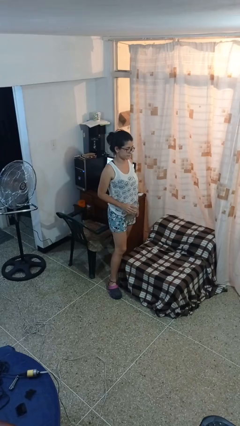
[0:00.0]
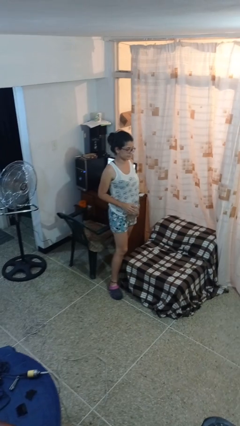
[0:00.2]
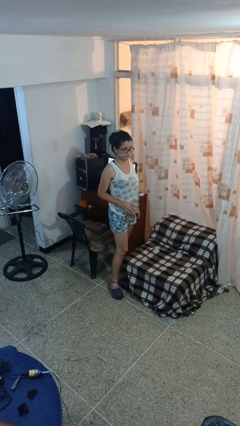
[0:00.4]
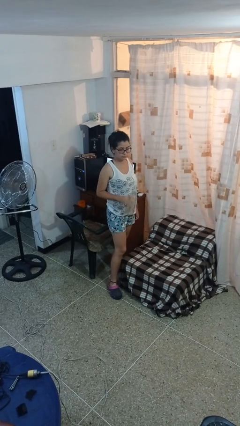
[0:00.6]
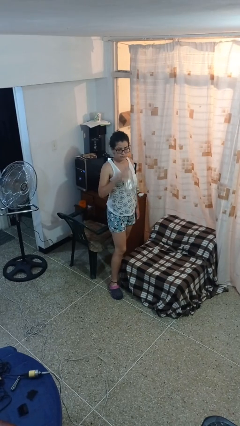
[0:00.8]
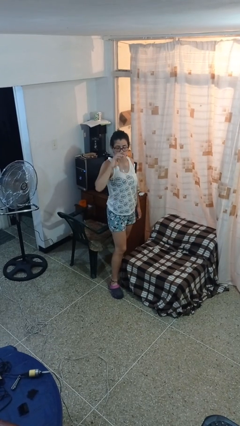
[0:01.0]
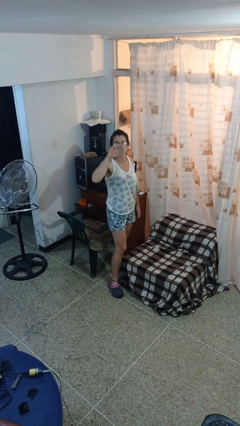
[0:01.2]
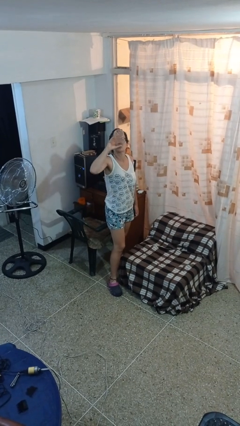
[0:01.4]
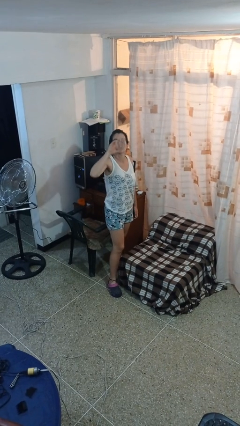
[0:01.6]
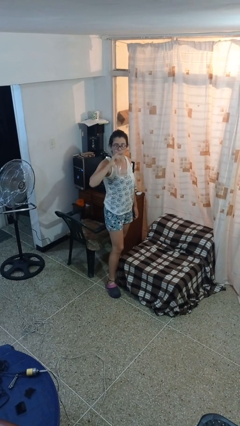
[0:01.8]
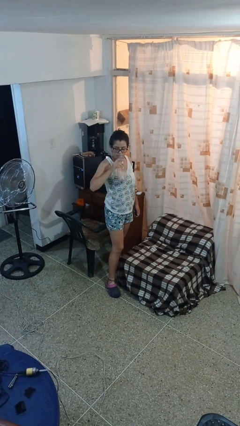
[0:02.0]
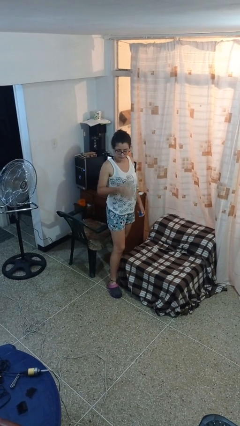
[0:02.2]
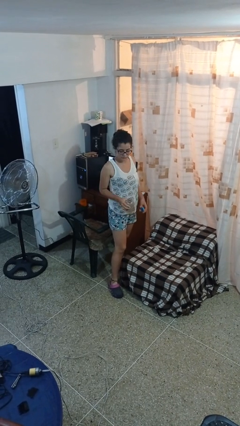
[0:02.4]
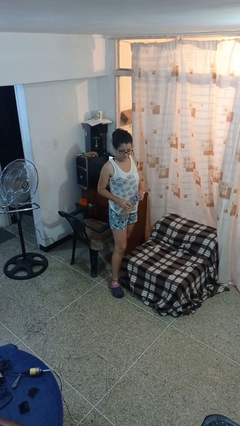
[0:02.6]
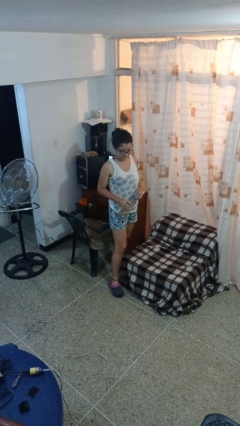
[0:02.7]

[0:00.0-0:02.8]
person drinks from bottle

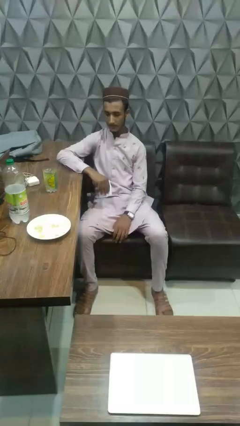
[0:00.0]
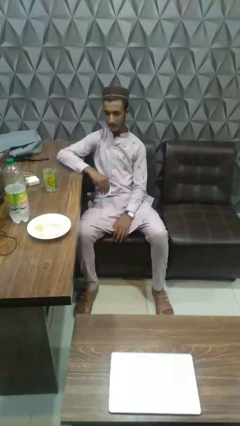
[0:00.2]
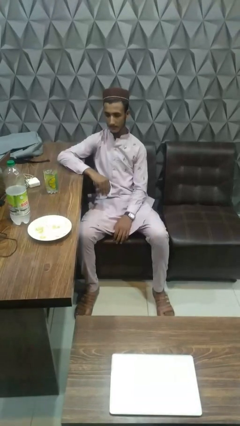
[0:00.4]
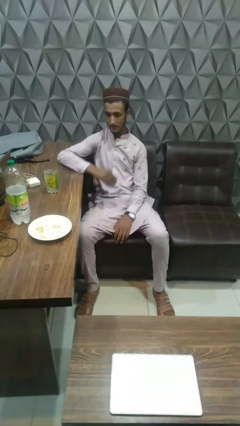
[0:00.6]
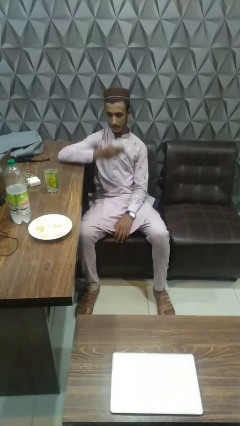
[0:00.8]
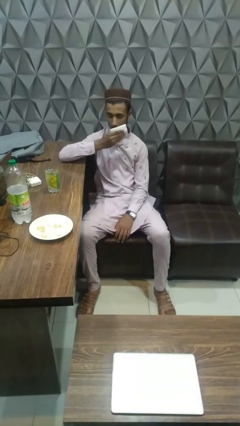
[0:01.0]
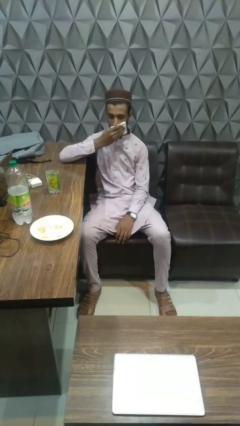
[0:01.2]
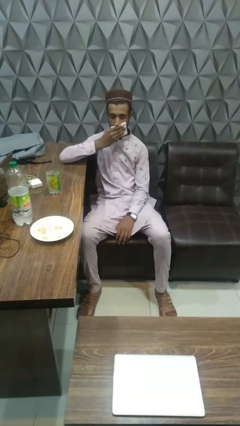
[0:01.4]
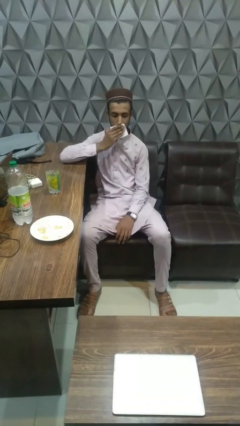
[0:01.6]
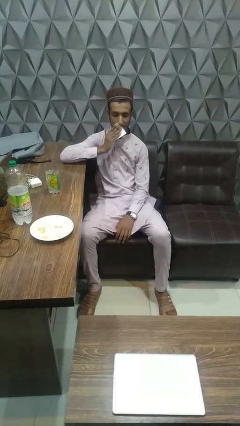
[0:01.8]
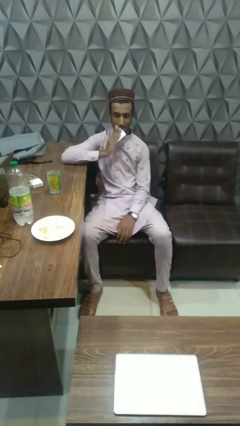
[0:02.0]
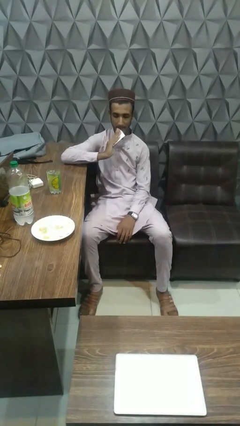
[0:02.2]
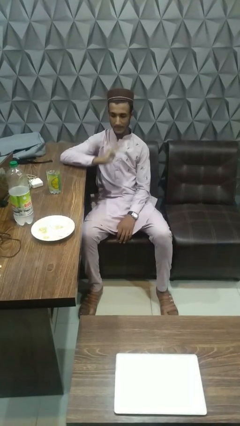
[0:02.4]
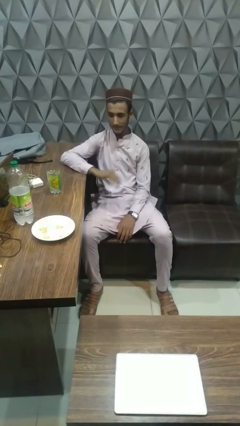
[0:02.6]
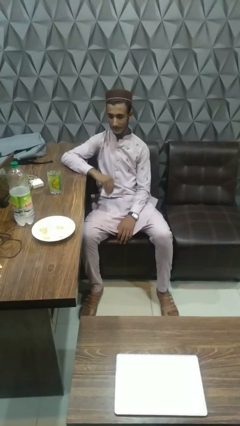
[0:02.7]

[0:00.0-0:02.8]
person wipes mouth with napkin

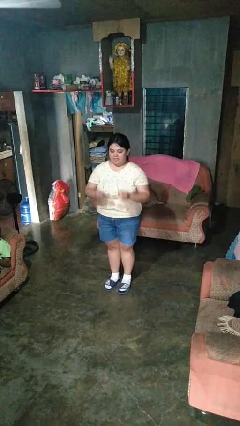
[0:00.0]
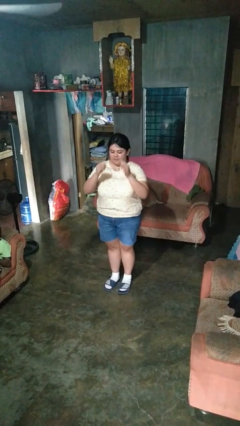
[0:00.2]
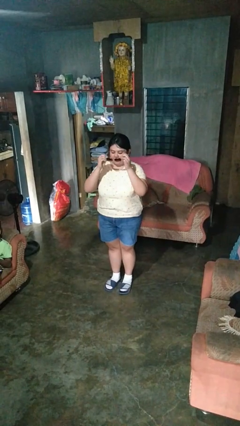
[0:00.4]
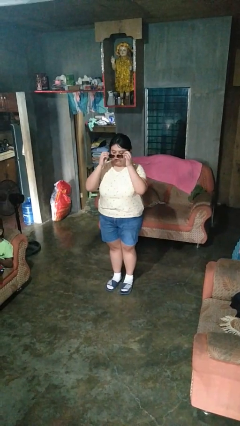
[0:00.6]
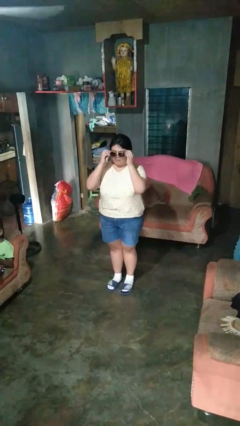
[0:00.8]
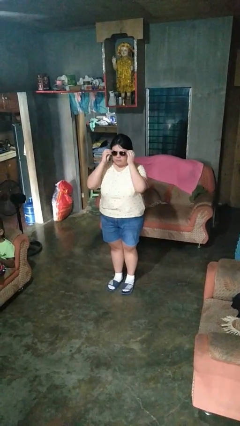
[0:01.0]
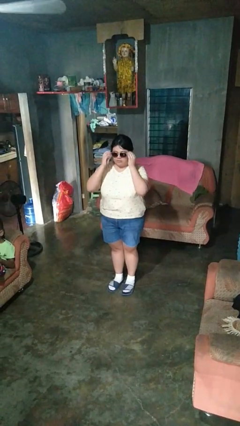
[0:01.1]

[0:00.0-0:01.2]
person puts on sunglasses

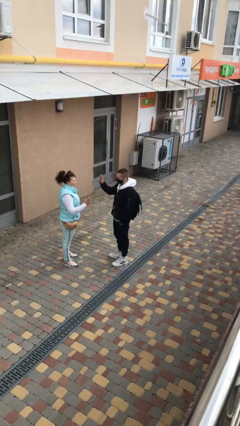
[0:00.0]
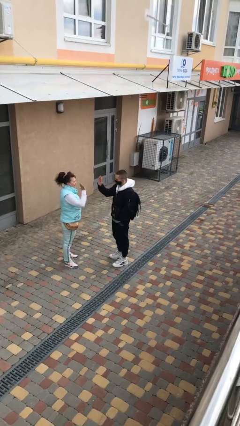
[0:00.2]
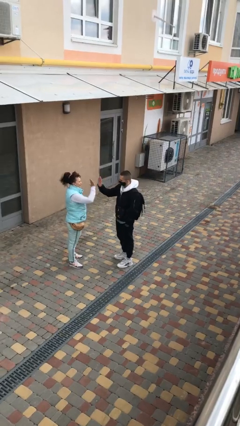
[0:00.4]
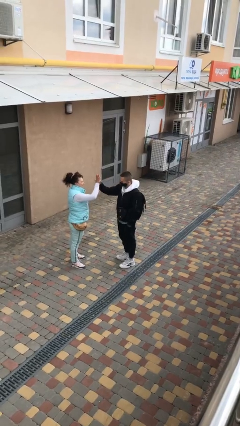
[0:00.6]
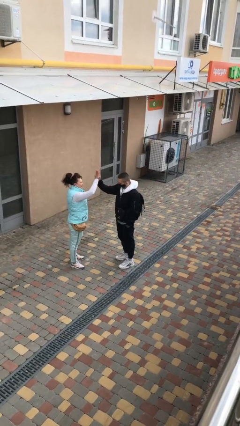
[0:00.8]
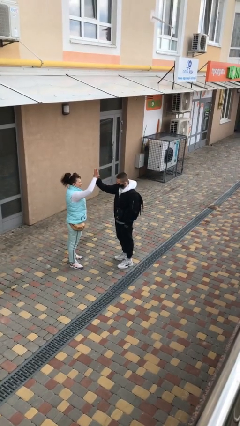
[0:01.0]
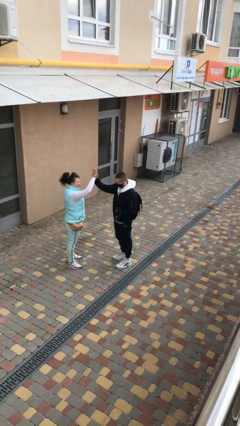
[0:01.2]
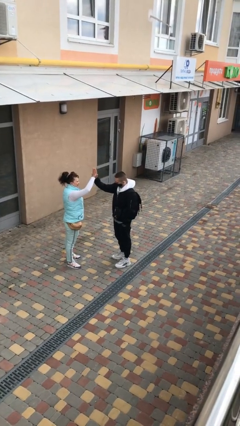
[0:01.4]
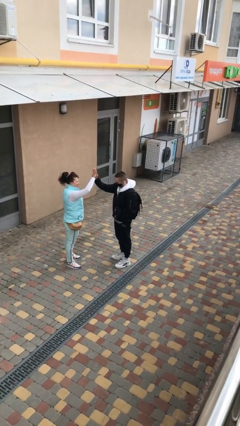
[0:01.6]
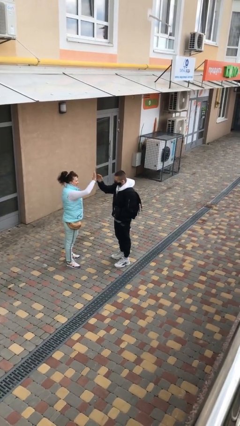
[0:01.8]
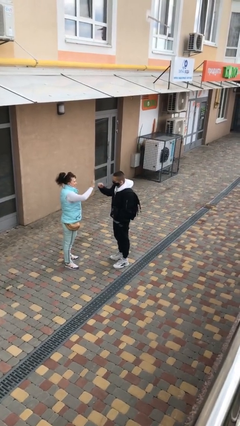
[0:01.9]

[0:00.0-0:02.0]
person highfives hand

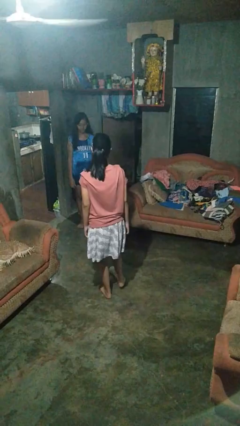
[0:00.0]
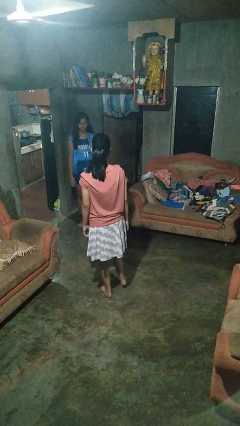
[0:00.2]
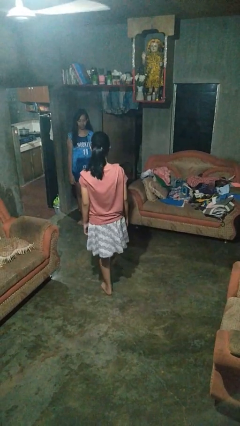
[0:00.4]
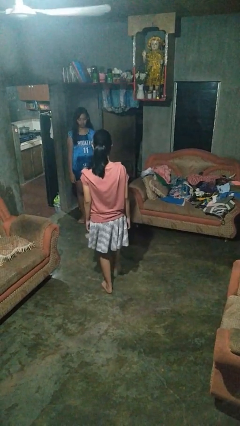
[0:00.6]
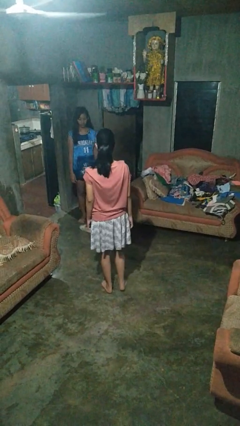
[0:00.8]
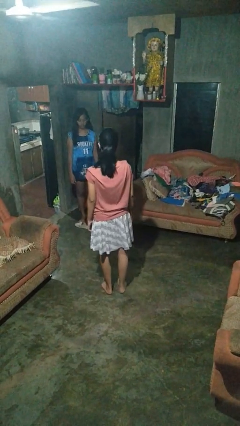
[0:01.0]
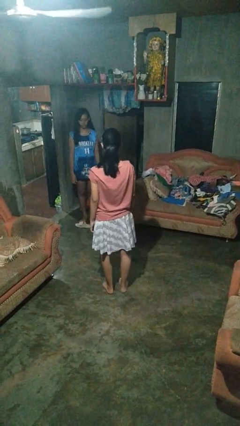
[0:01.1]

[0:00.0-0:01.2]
person kicks object to person

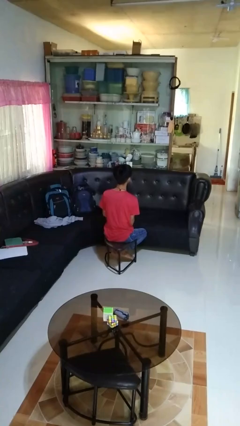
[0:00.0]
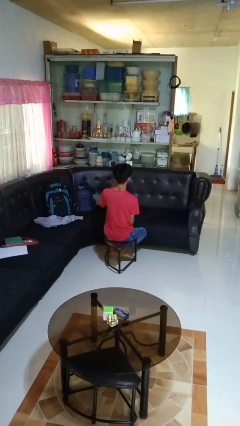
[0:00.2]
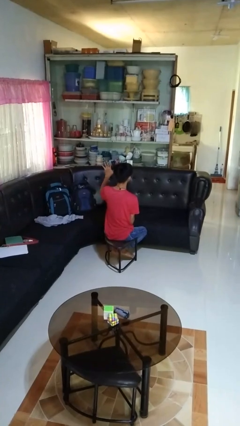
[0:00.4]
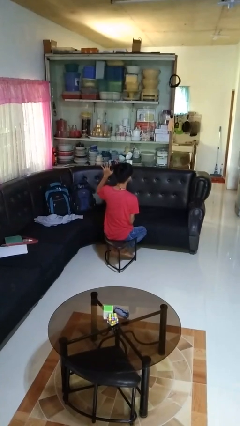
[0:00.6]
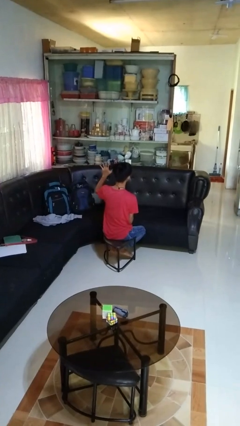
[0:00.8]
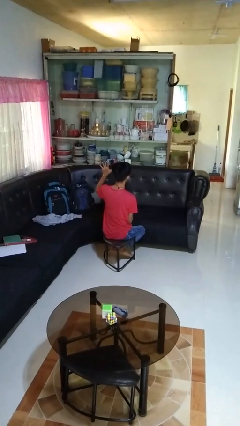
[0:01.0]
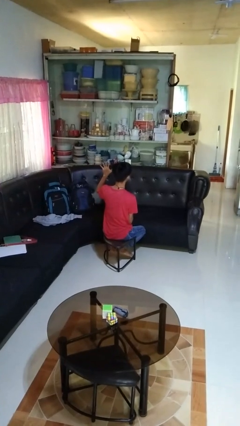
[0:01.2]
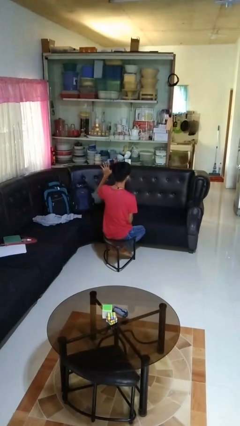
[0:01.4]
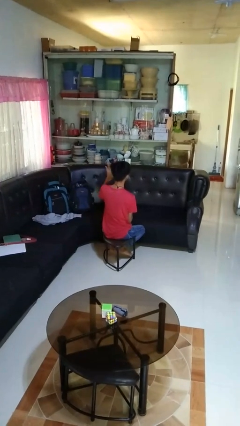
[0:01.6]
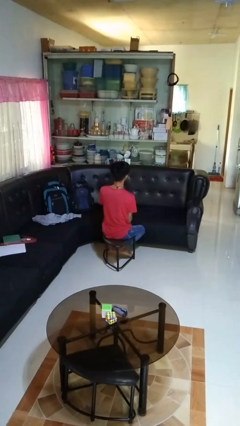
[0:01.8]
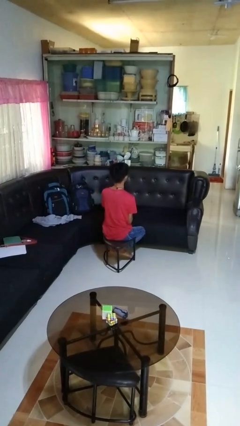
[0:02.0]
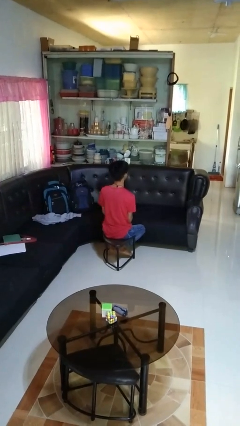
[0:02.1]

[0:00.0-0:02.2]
person gestures number five

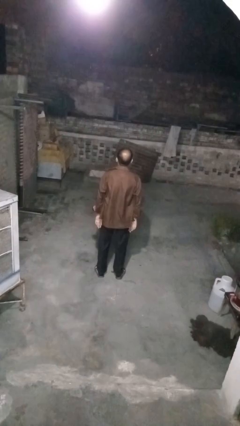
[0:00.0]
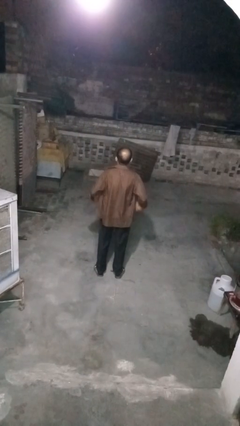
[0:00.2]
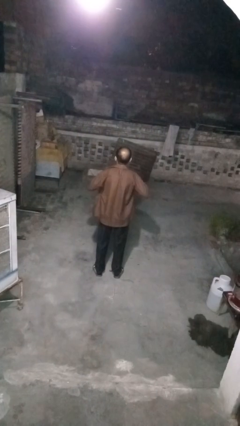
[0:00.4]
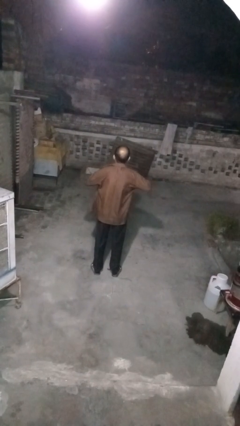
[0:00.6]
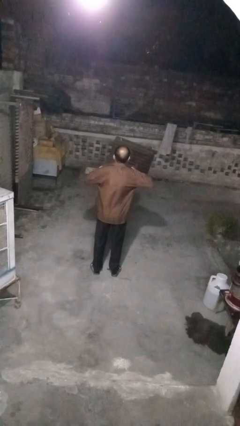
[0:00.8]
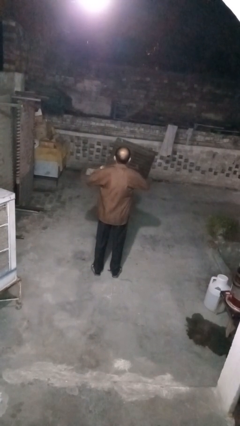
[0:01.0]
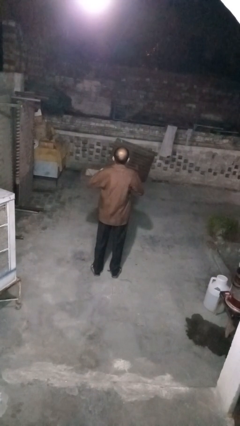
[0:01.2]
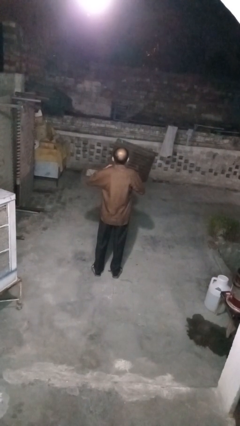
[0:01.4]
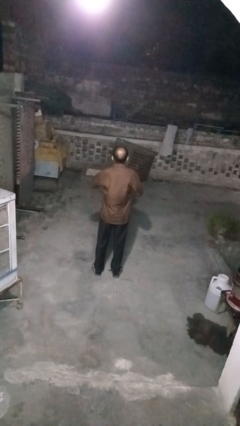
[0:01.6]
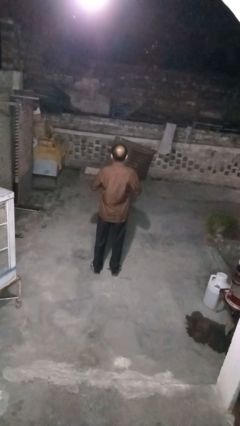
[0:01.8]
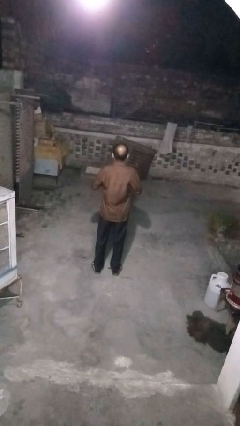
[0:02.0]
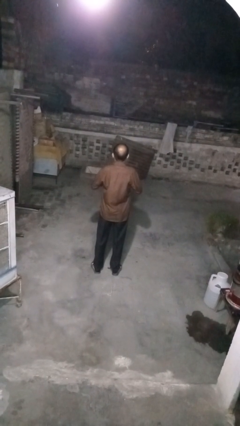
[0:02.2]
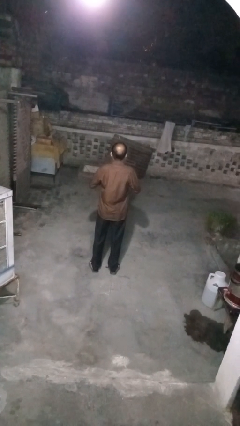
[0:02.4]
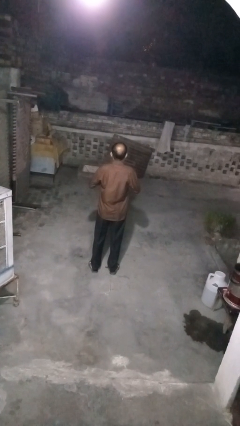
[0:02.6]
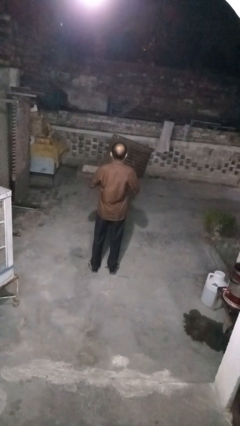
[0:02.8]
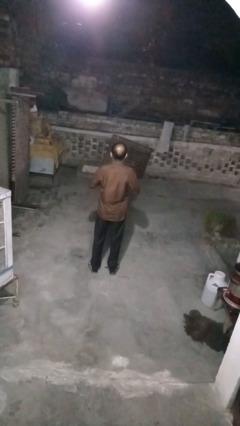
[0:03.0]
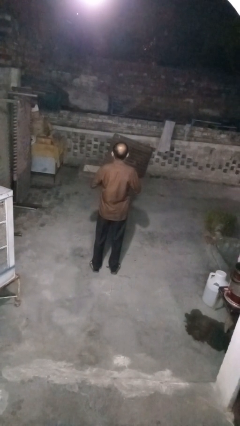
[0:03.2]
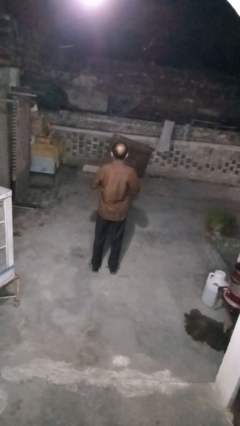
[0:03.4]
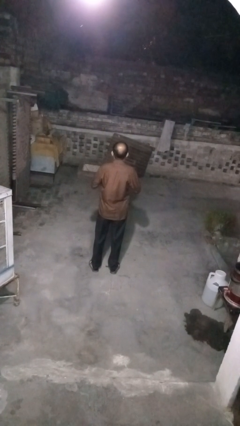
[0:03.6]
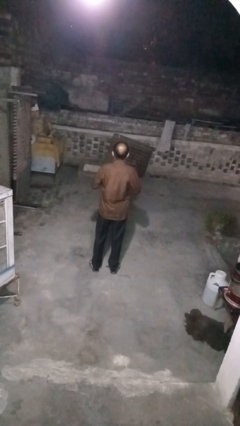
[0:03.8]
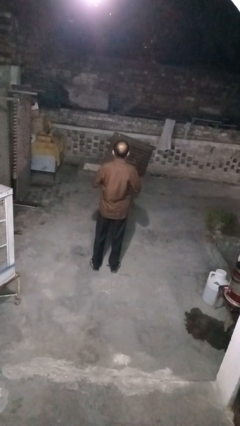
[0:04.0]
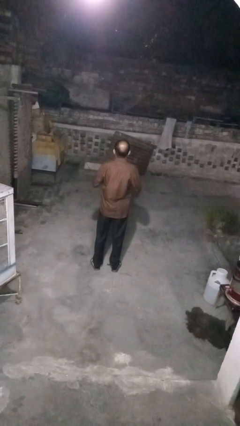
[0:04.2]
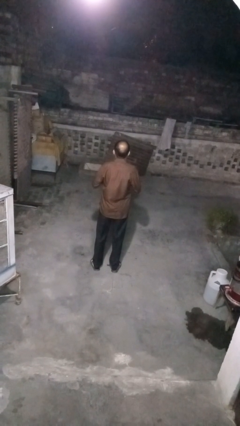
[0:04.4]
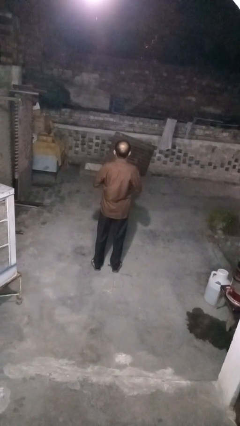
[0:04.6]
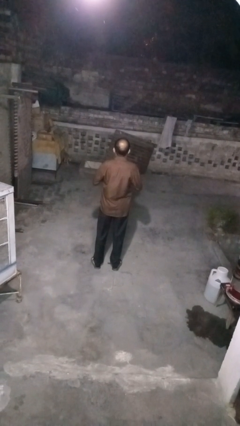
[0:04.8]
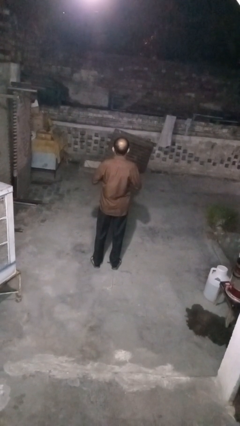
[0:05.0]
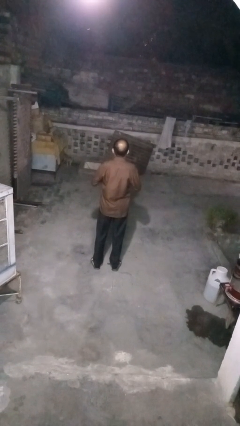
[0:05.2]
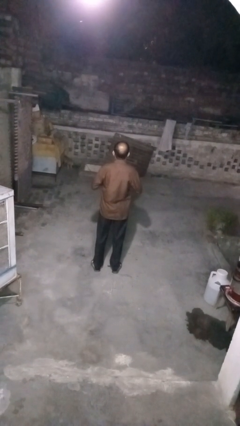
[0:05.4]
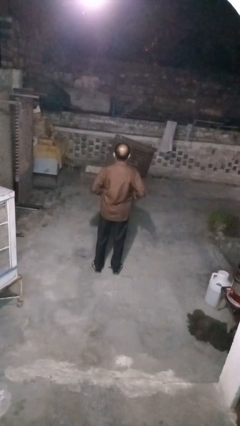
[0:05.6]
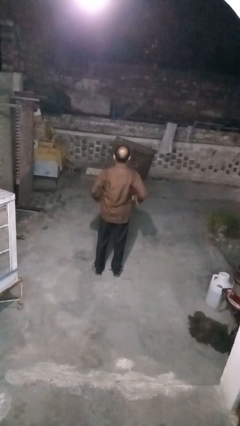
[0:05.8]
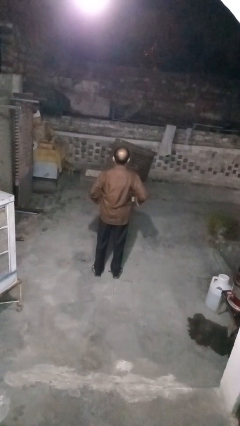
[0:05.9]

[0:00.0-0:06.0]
person buttons shirt
